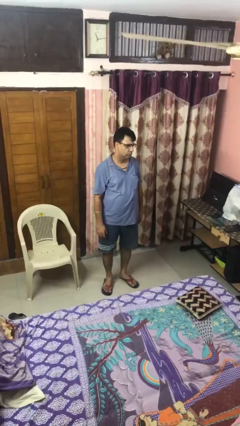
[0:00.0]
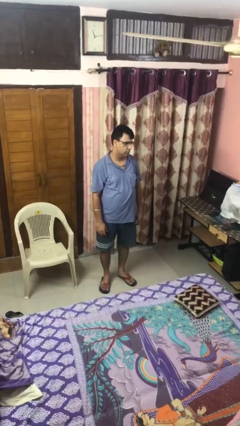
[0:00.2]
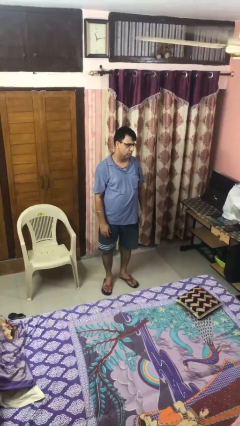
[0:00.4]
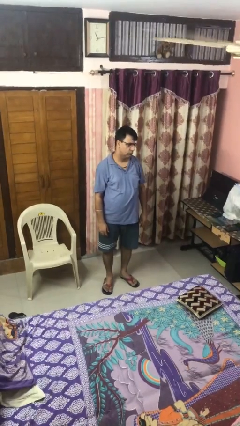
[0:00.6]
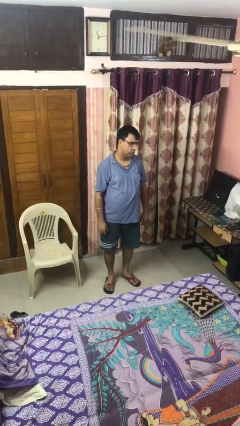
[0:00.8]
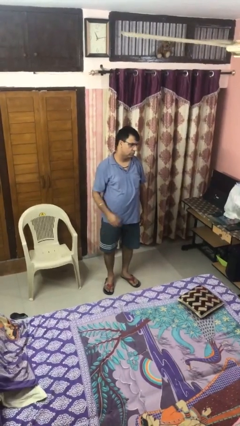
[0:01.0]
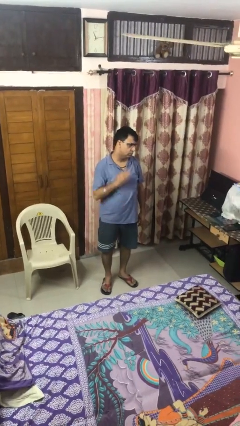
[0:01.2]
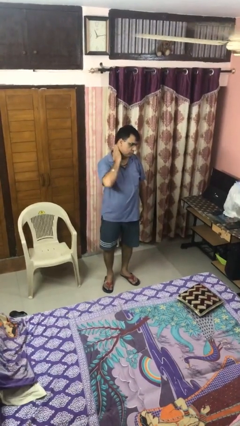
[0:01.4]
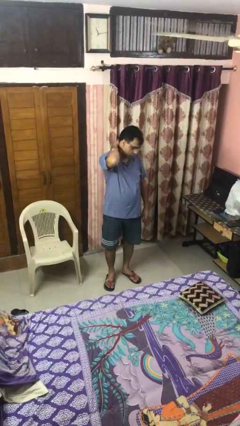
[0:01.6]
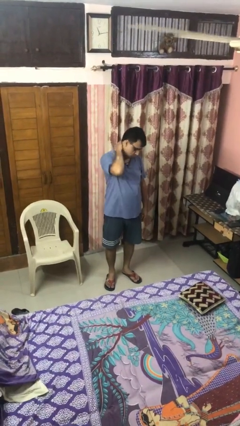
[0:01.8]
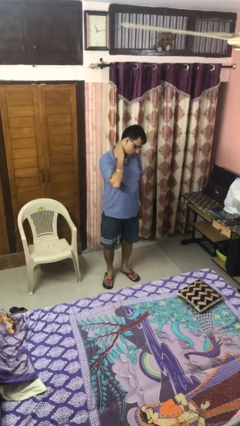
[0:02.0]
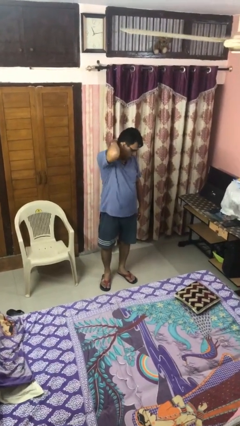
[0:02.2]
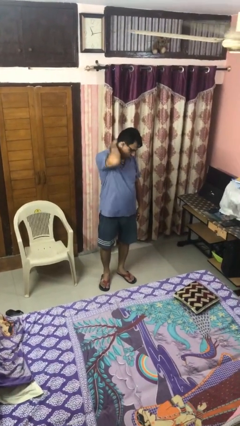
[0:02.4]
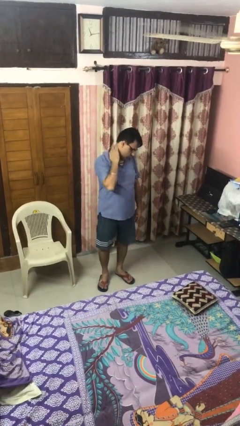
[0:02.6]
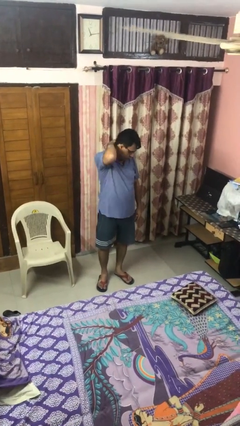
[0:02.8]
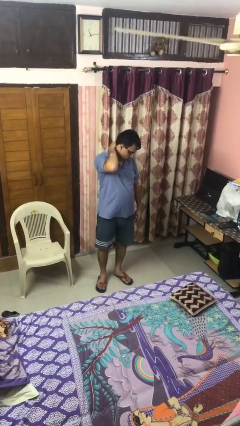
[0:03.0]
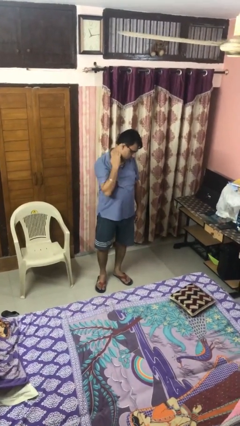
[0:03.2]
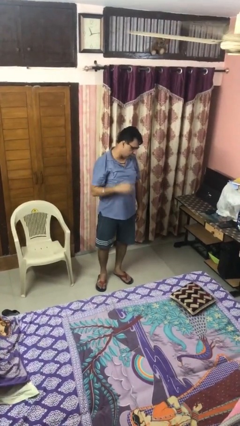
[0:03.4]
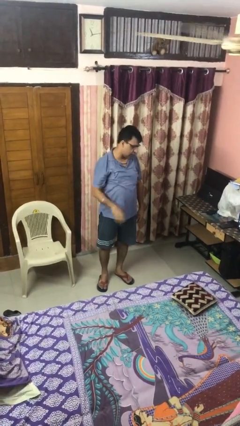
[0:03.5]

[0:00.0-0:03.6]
person rubs neck

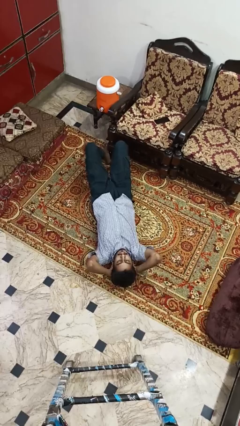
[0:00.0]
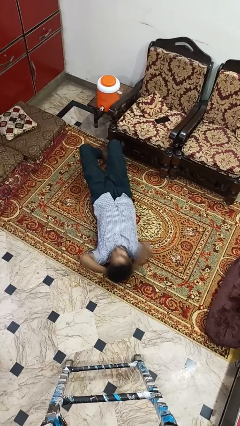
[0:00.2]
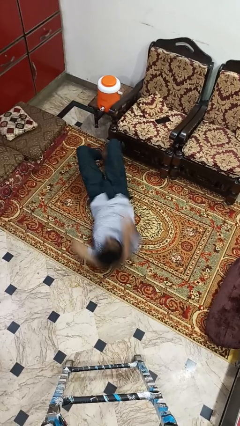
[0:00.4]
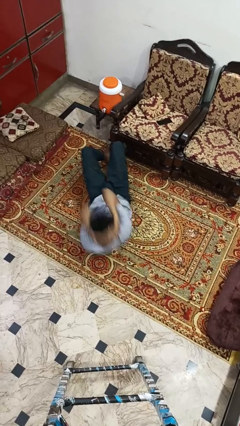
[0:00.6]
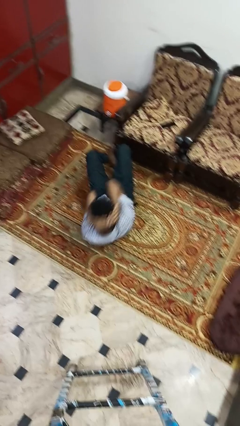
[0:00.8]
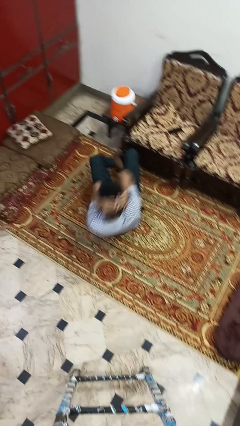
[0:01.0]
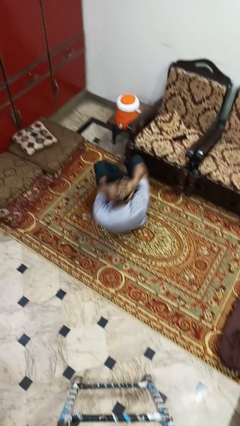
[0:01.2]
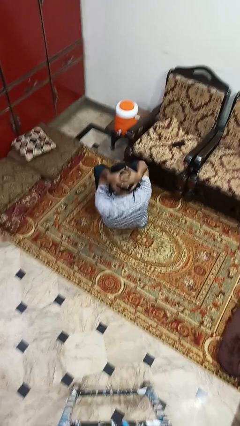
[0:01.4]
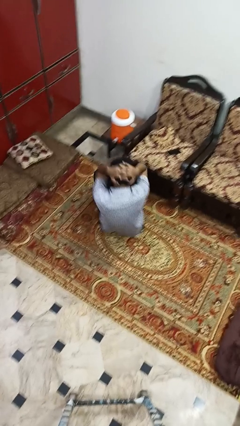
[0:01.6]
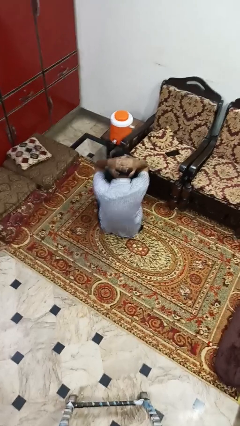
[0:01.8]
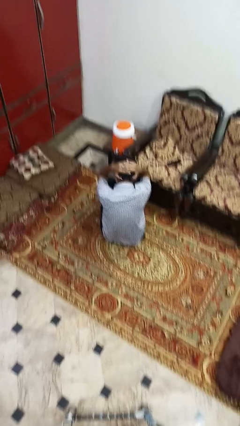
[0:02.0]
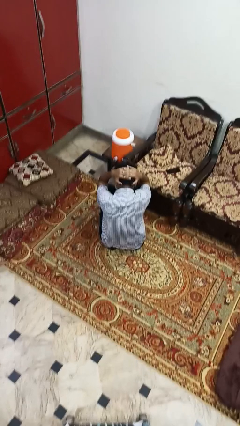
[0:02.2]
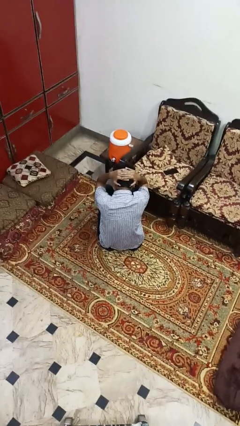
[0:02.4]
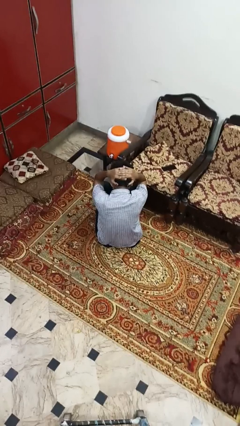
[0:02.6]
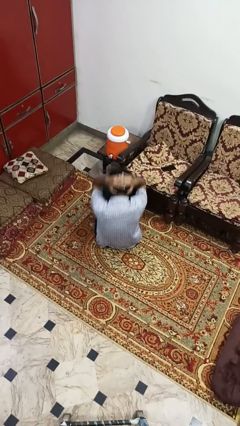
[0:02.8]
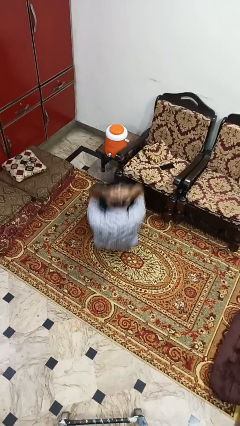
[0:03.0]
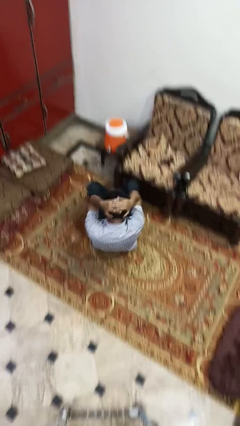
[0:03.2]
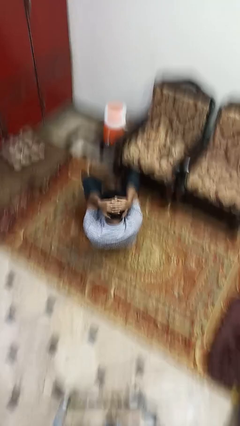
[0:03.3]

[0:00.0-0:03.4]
person exercises with situp

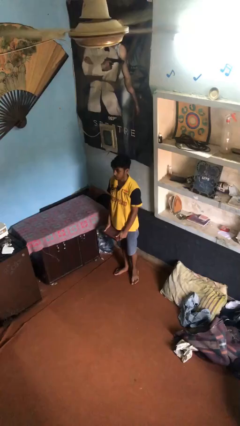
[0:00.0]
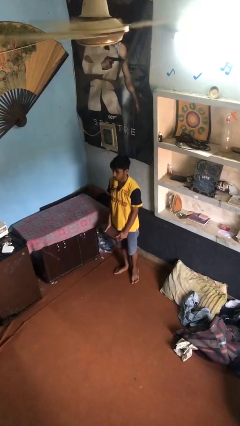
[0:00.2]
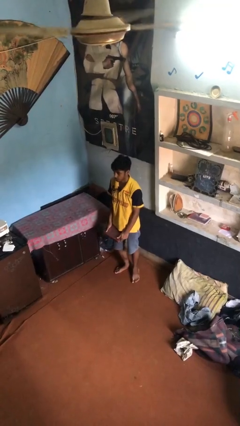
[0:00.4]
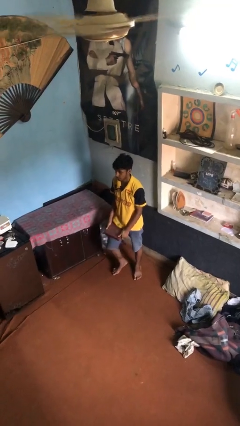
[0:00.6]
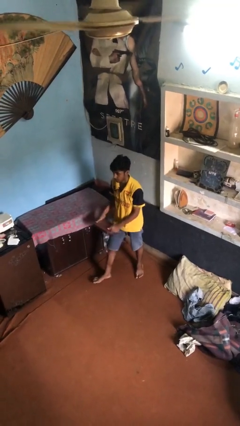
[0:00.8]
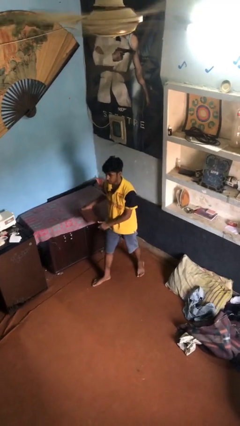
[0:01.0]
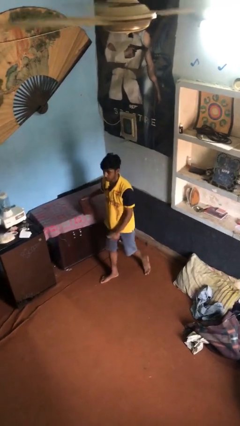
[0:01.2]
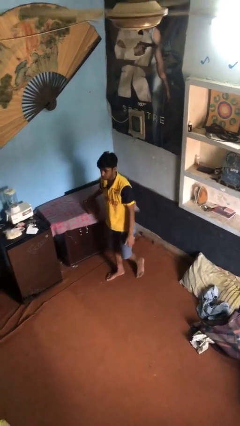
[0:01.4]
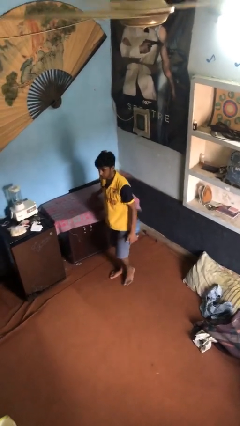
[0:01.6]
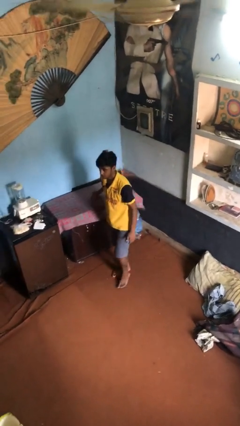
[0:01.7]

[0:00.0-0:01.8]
person puts down object on table

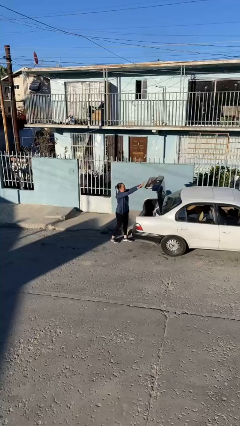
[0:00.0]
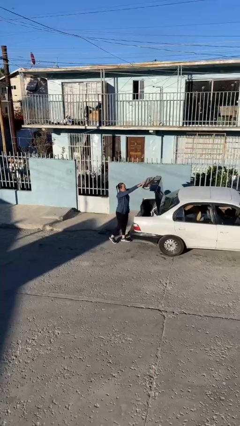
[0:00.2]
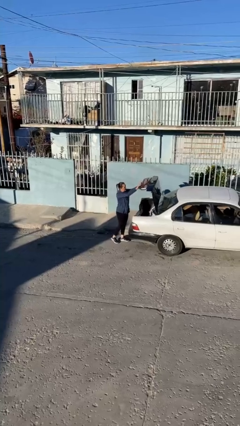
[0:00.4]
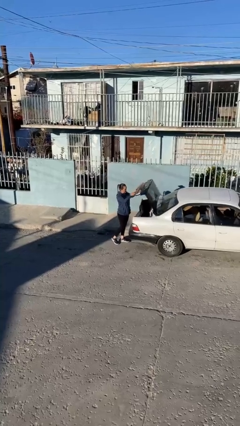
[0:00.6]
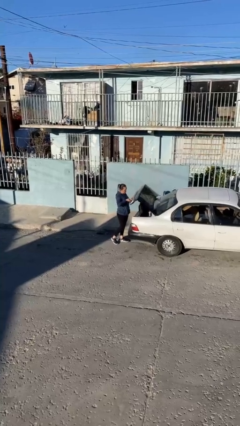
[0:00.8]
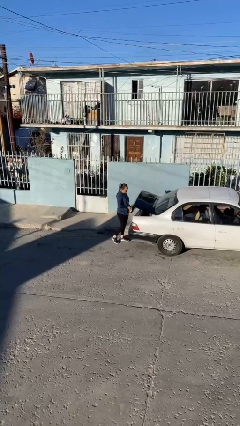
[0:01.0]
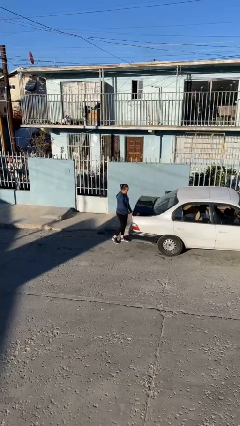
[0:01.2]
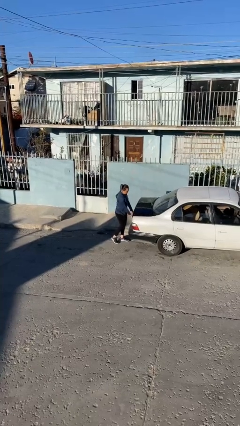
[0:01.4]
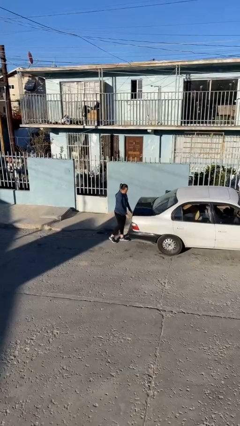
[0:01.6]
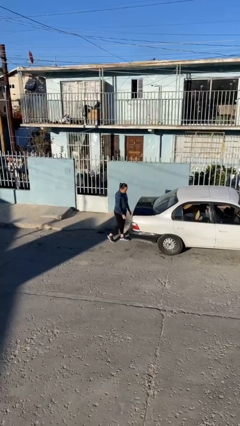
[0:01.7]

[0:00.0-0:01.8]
person closes car trunk

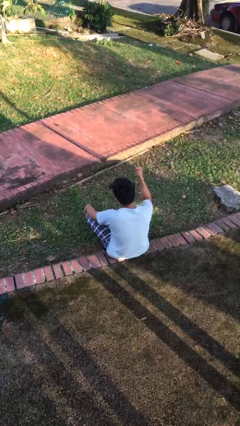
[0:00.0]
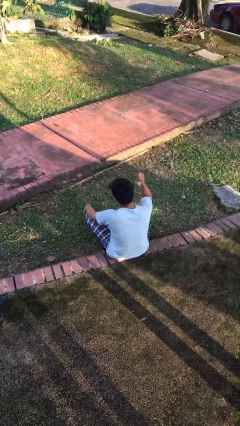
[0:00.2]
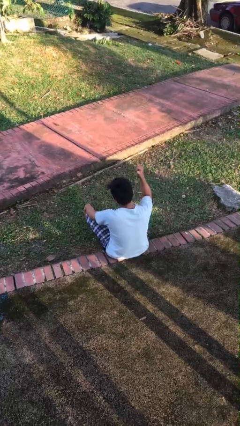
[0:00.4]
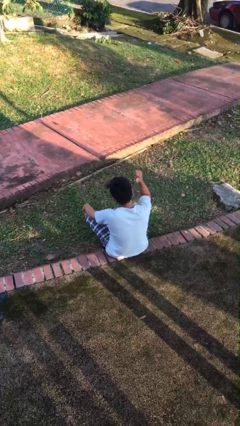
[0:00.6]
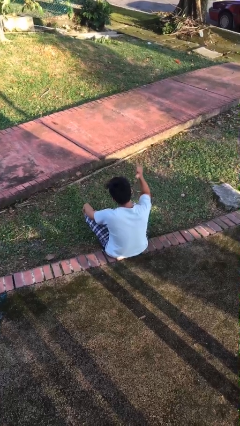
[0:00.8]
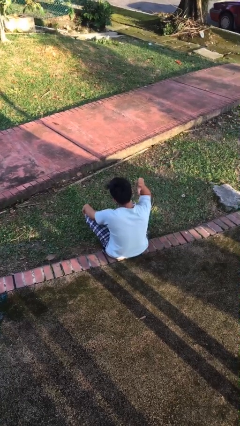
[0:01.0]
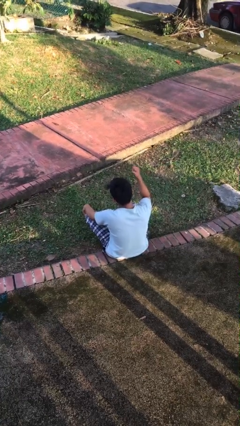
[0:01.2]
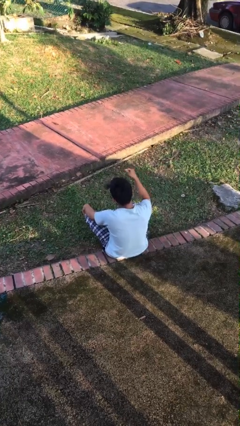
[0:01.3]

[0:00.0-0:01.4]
person gestures behind me

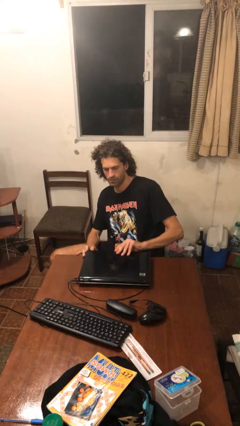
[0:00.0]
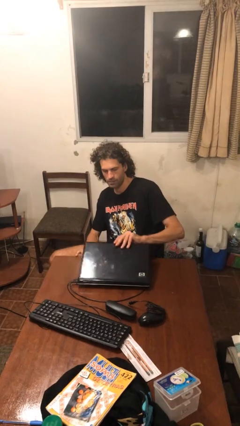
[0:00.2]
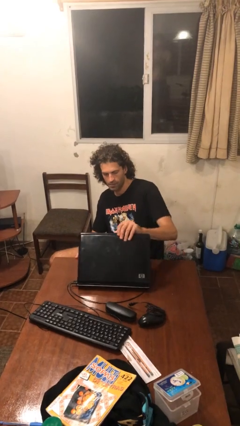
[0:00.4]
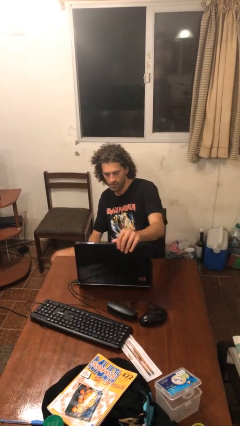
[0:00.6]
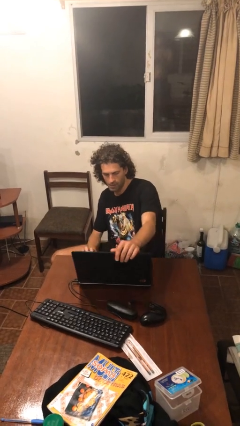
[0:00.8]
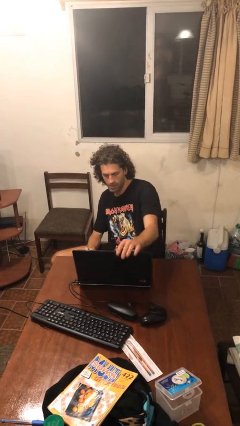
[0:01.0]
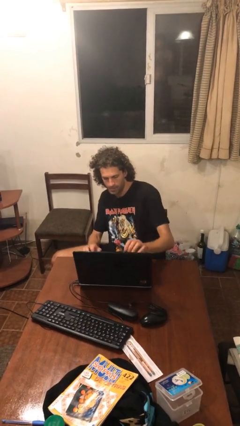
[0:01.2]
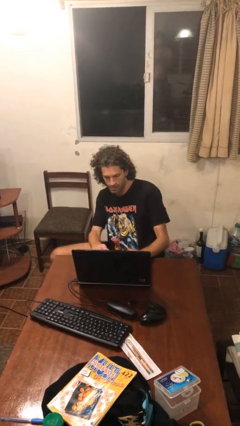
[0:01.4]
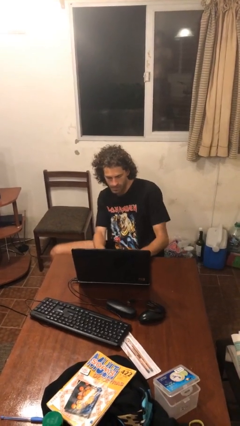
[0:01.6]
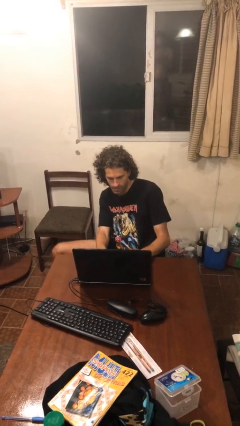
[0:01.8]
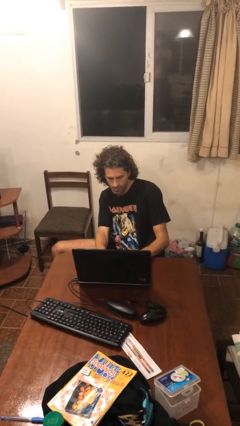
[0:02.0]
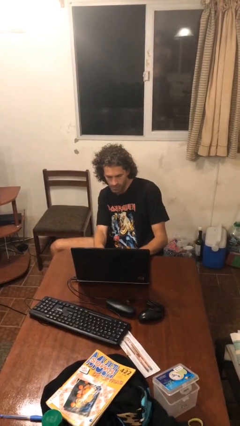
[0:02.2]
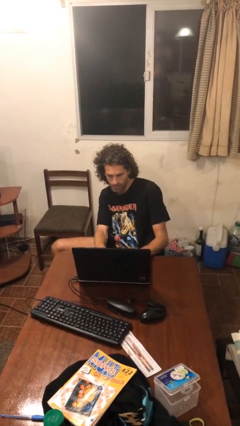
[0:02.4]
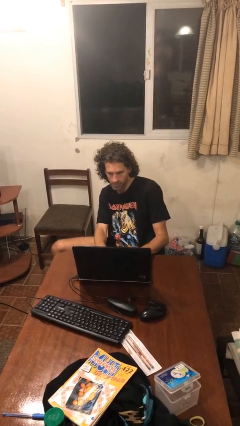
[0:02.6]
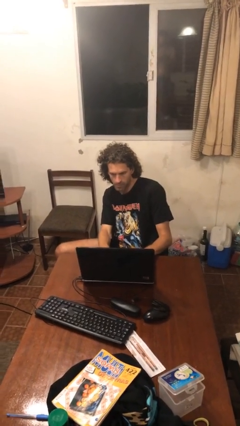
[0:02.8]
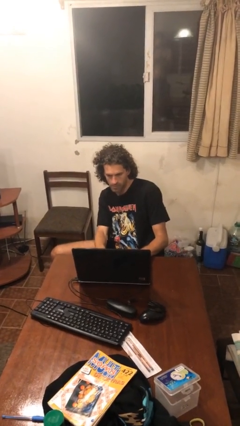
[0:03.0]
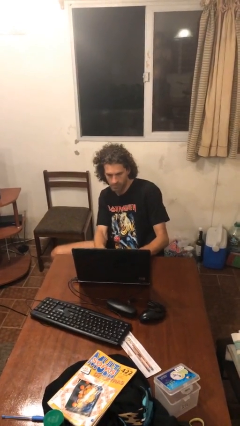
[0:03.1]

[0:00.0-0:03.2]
person interacts with laptop

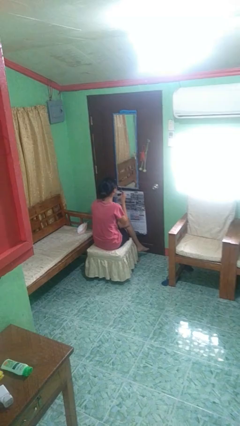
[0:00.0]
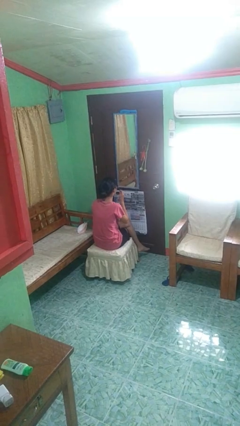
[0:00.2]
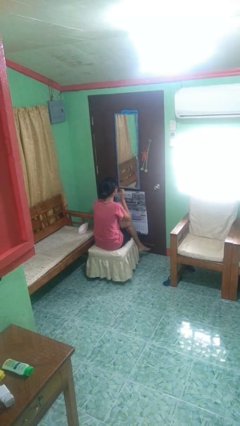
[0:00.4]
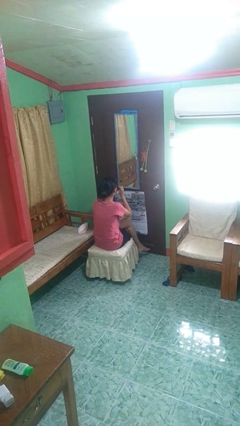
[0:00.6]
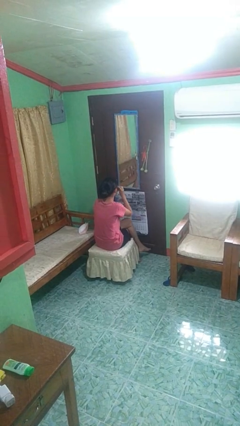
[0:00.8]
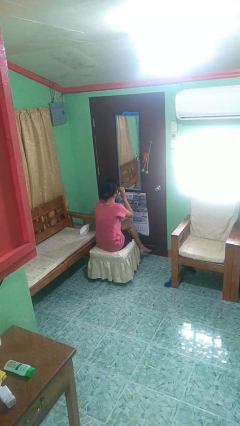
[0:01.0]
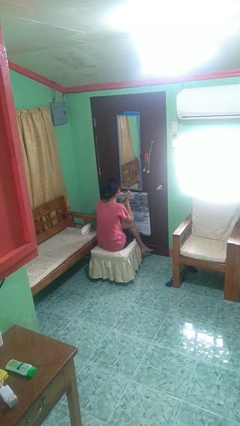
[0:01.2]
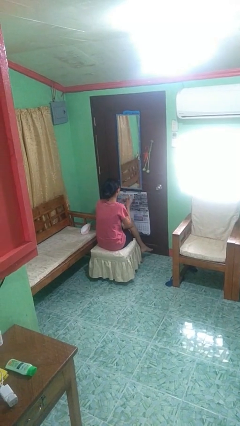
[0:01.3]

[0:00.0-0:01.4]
person puts on sunglasses

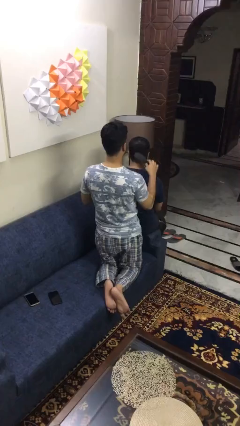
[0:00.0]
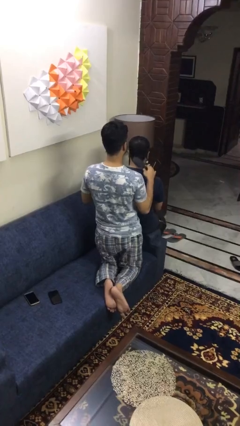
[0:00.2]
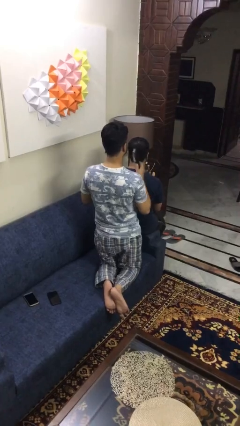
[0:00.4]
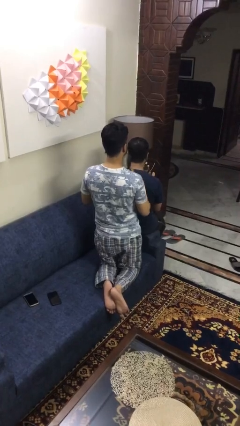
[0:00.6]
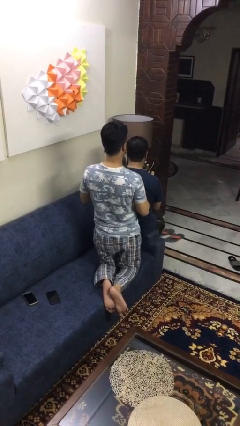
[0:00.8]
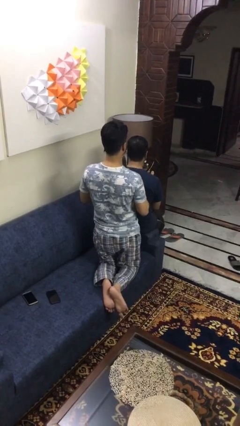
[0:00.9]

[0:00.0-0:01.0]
person brushes hair of person
